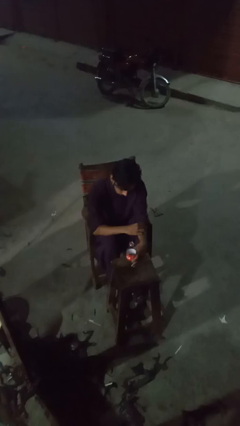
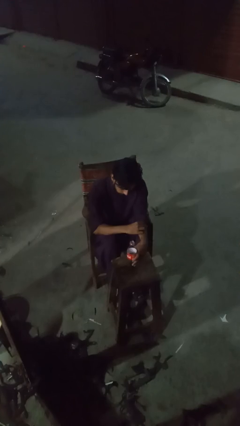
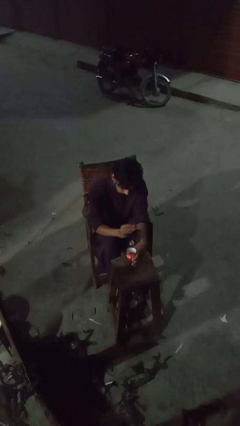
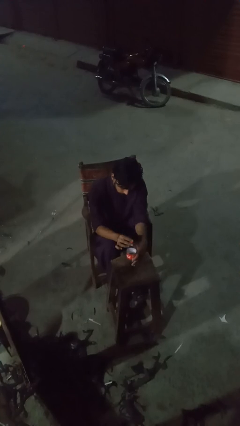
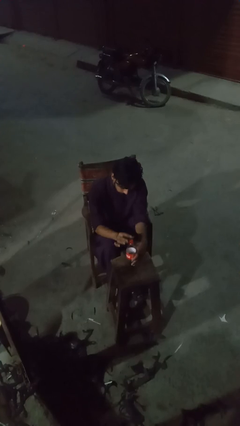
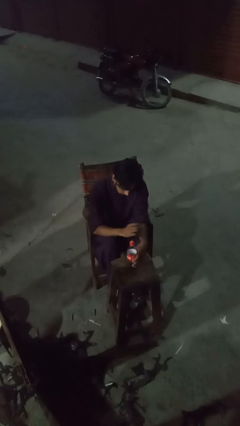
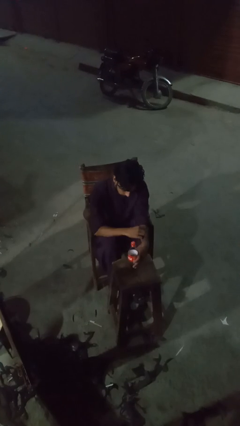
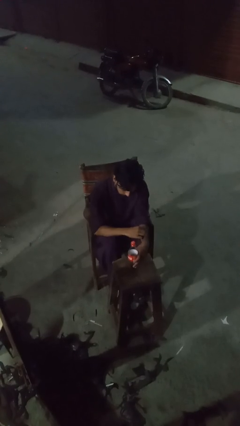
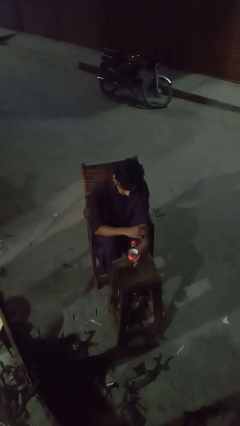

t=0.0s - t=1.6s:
person screws lid to bottle

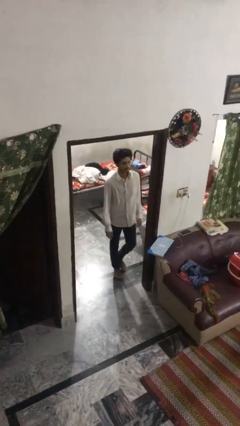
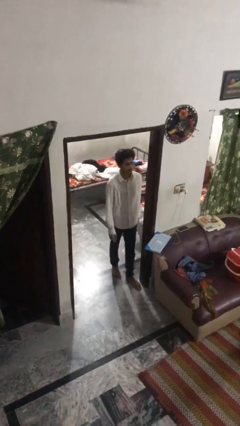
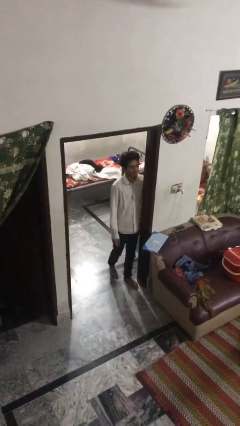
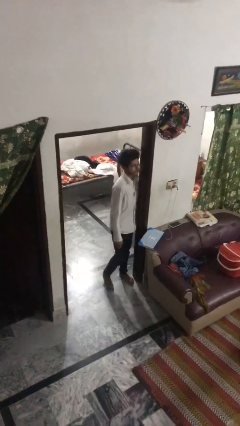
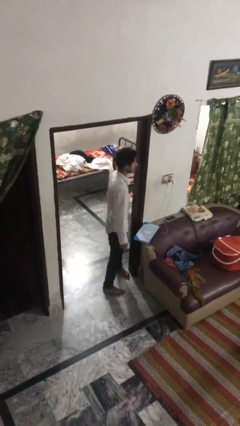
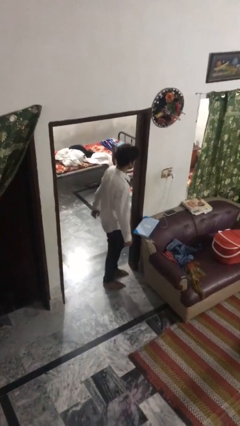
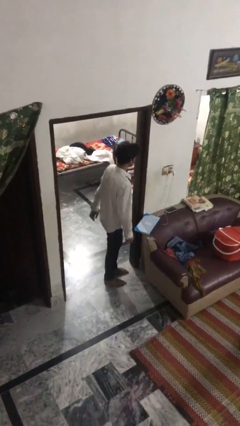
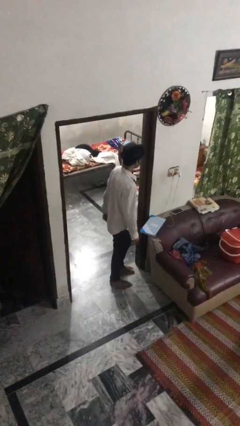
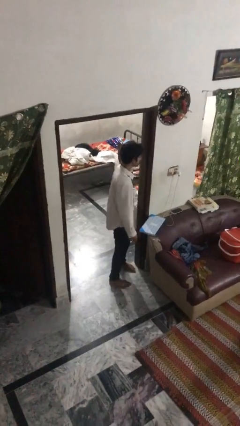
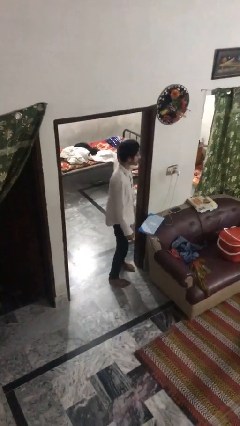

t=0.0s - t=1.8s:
person bumps into wall

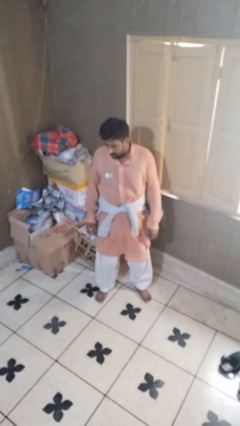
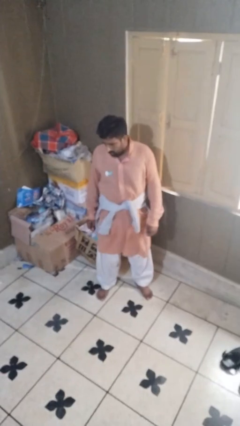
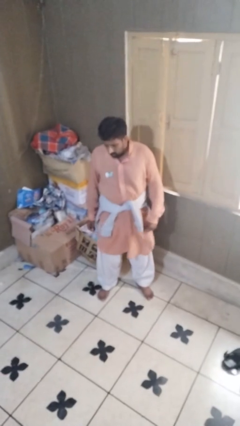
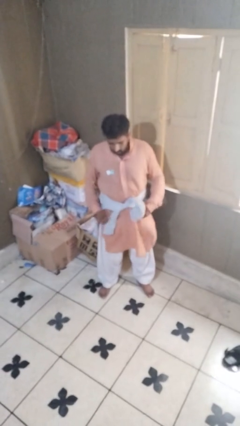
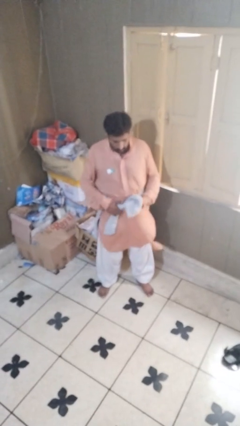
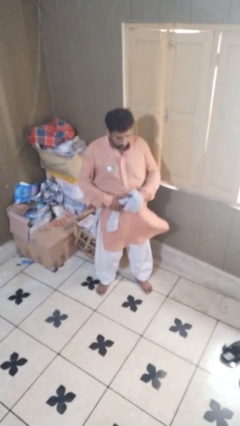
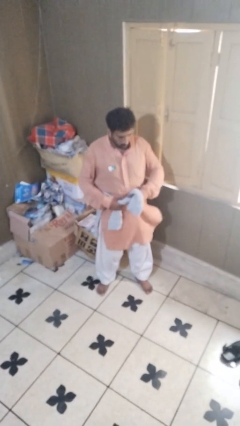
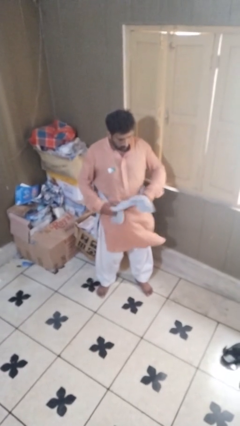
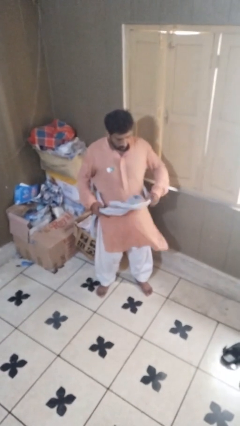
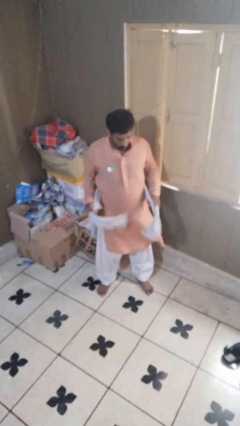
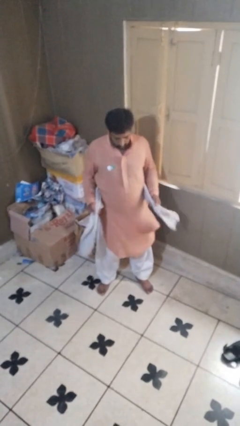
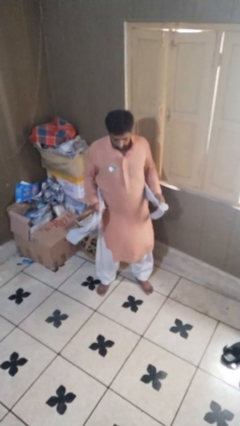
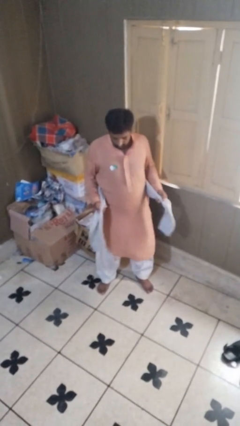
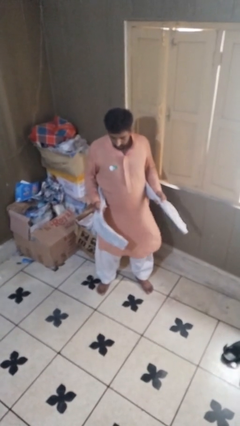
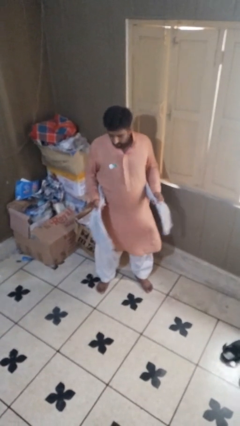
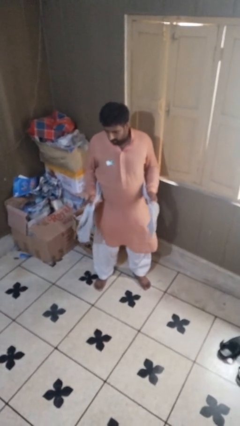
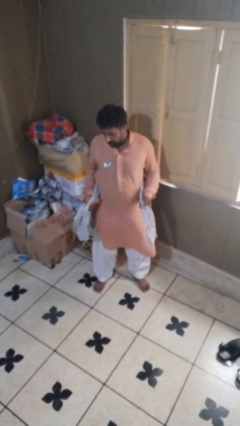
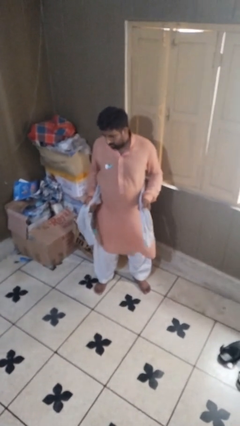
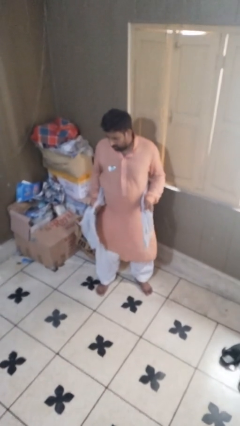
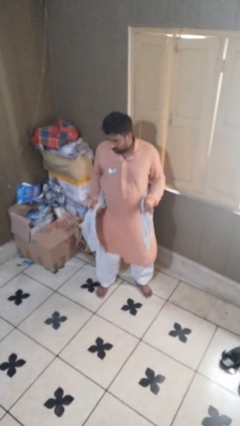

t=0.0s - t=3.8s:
person unties jacket around waist

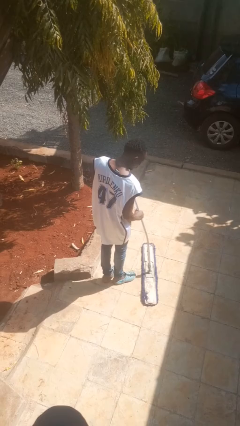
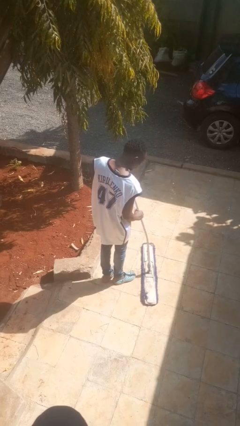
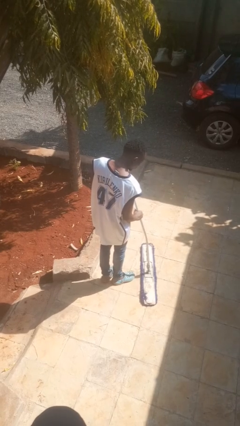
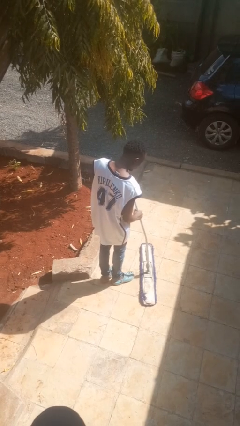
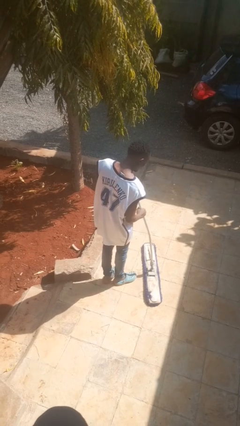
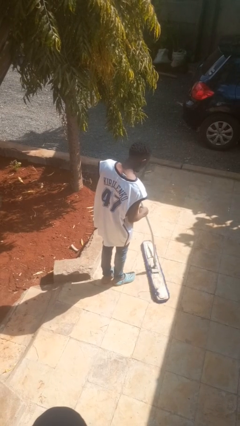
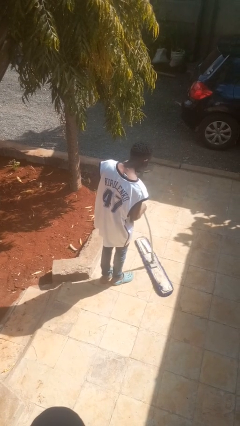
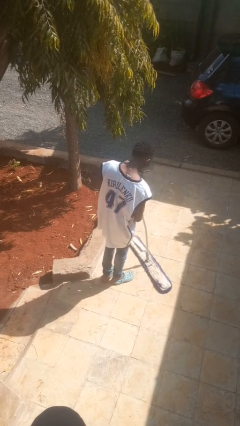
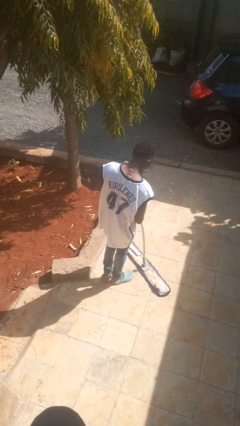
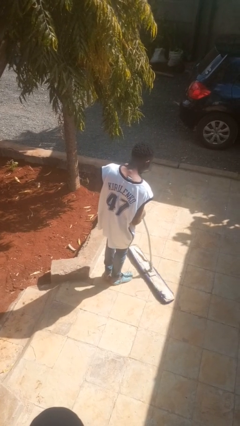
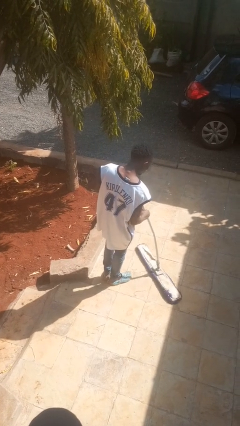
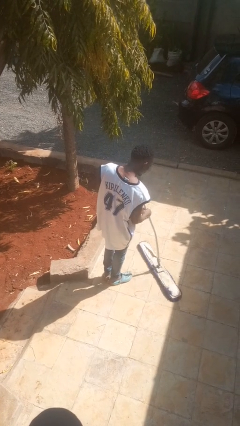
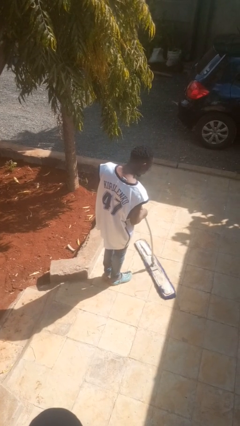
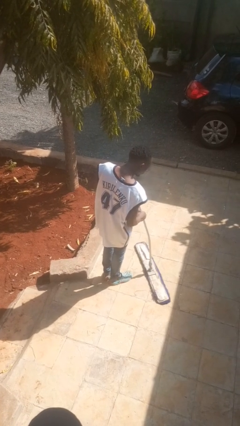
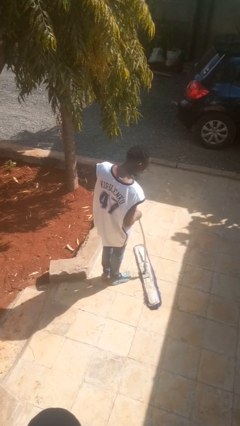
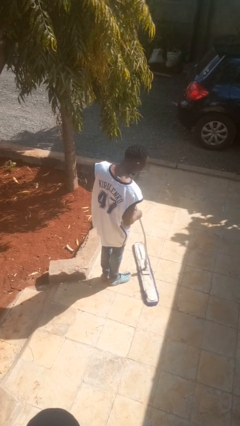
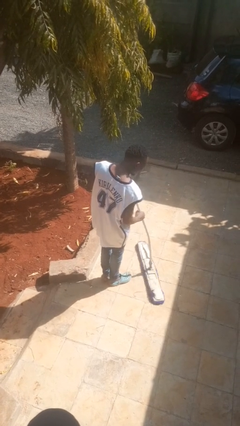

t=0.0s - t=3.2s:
person mops

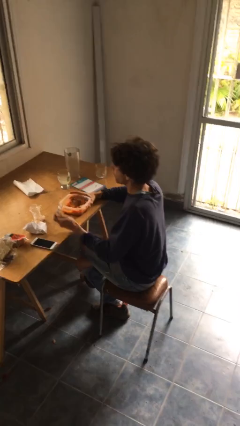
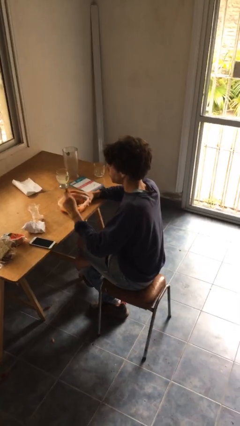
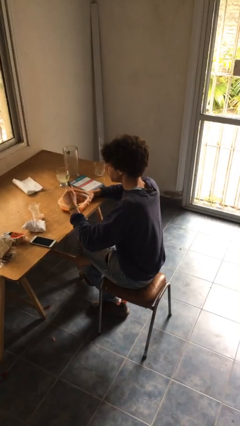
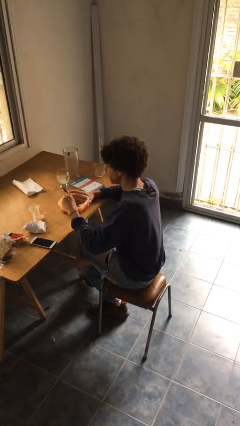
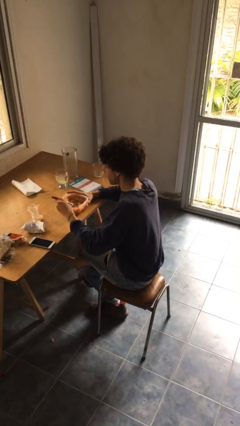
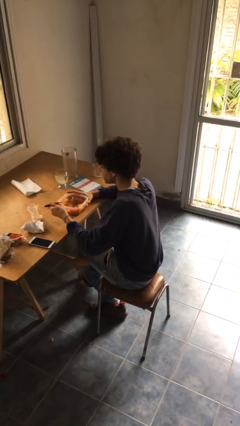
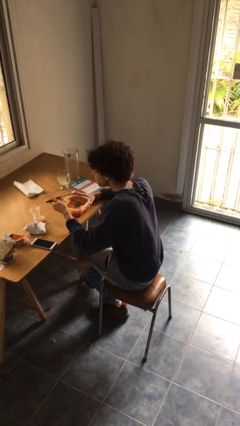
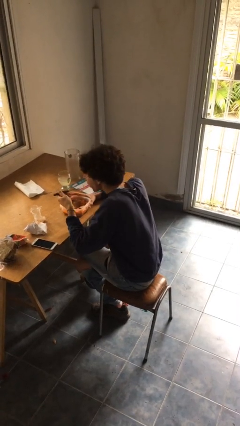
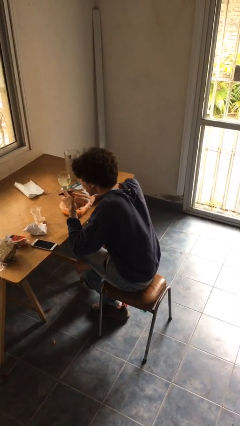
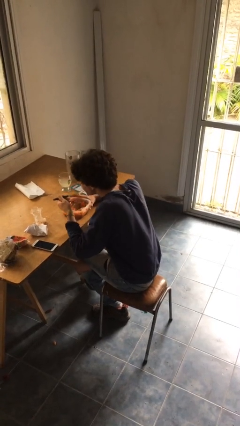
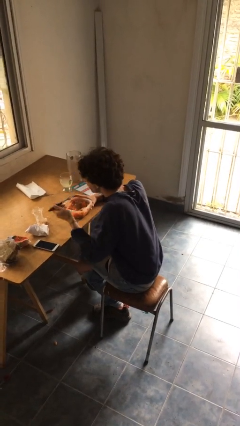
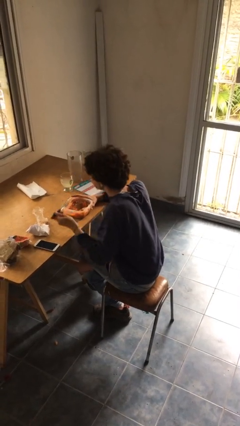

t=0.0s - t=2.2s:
person eats with utensil

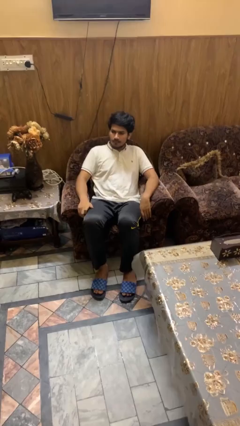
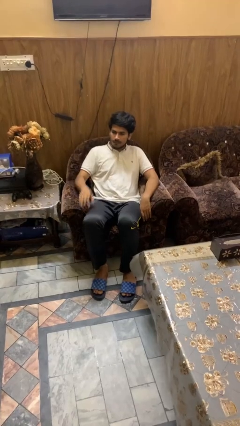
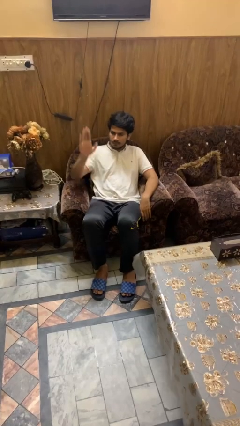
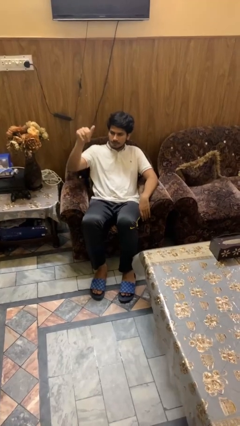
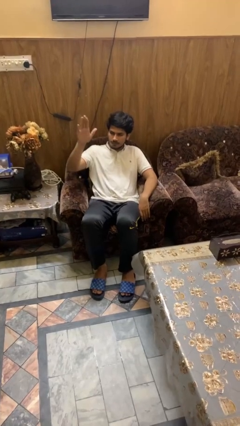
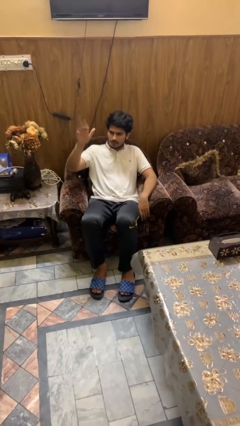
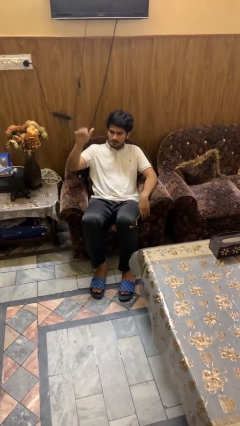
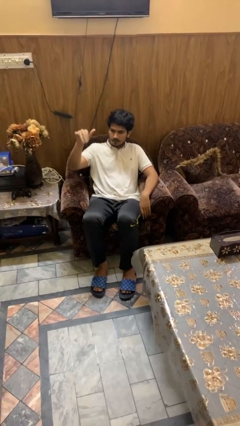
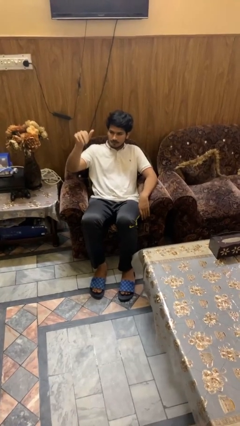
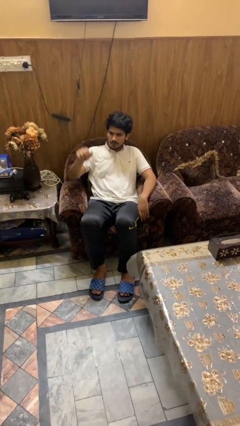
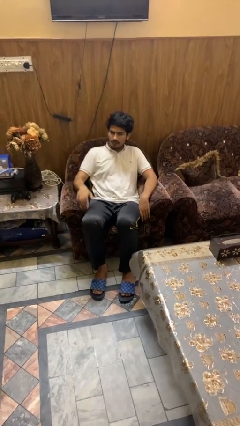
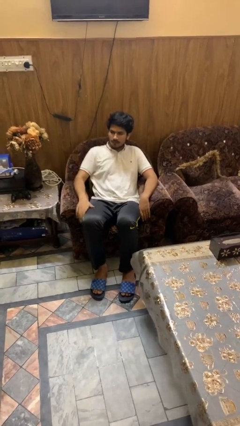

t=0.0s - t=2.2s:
person gestures come here

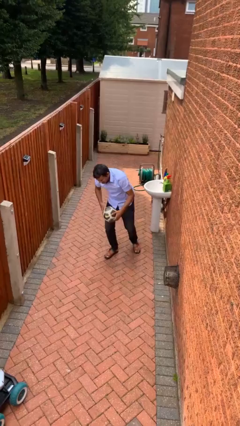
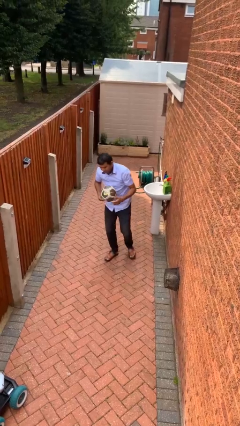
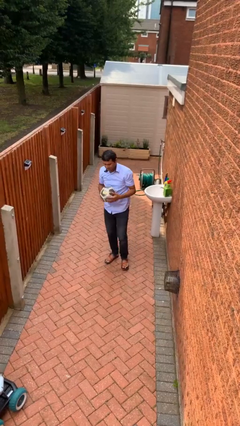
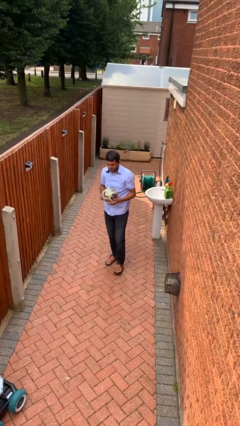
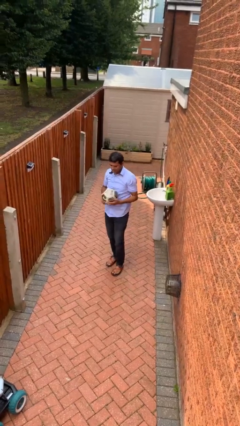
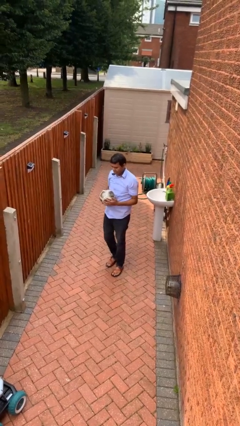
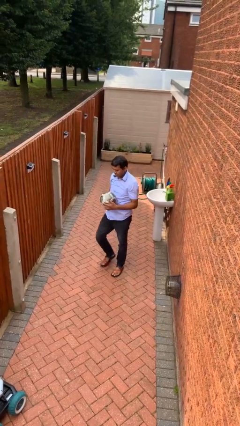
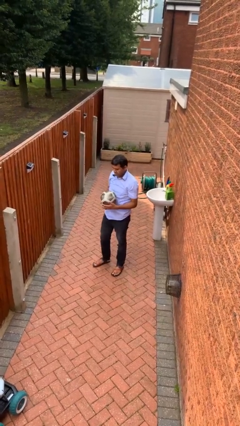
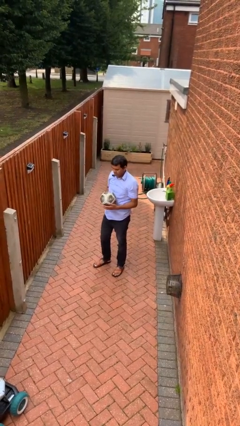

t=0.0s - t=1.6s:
person picks up object from floor

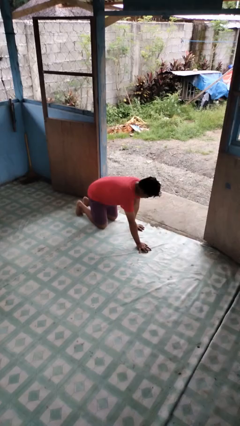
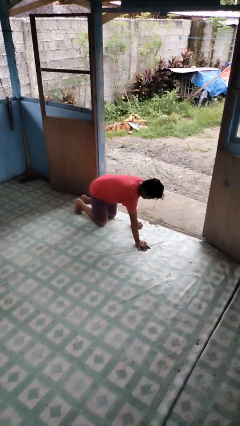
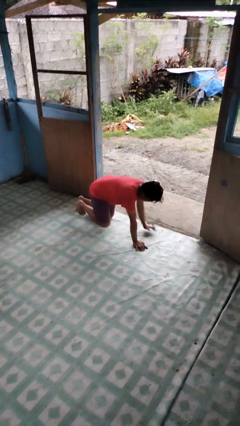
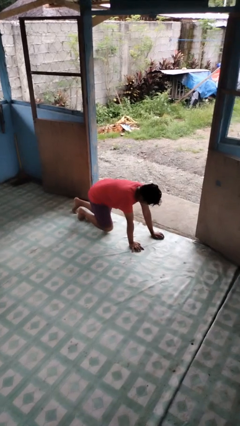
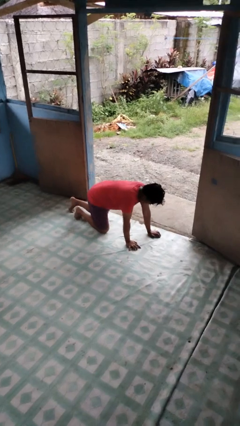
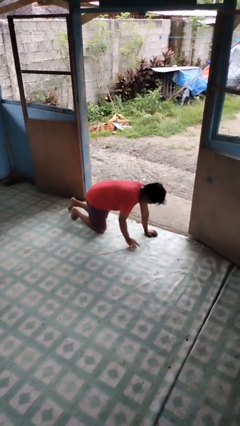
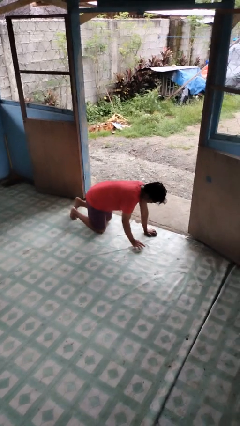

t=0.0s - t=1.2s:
person crawls
